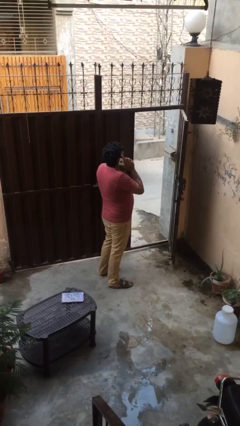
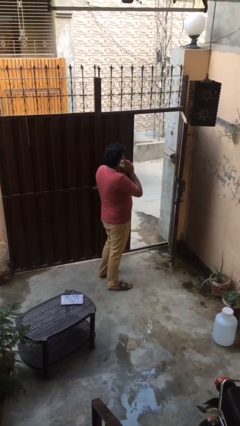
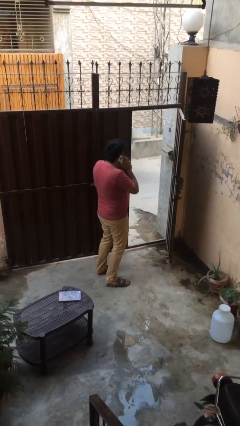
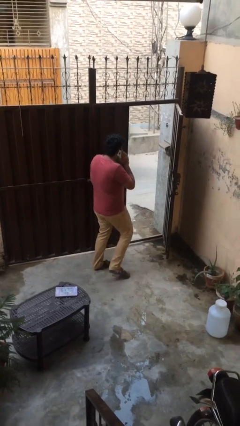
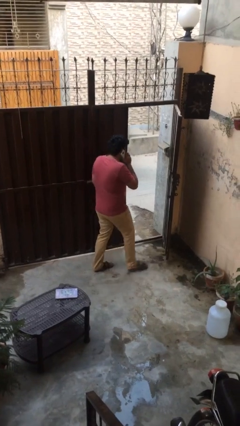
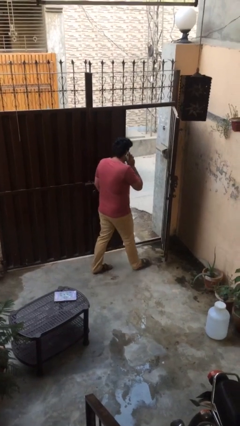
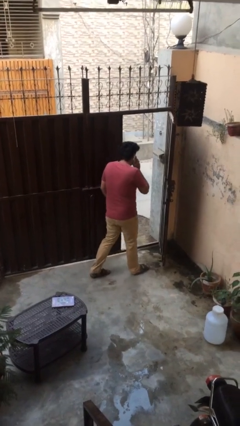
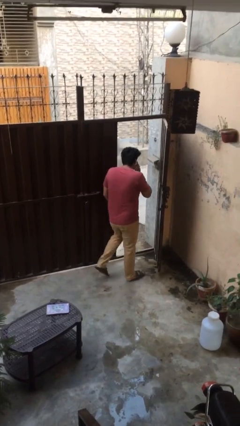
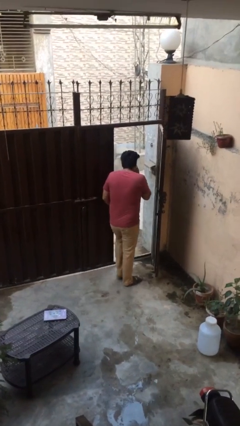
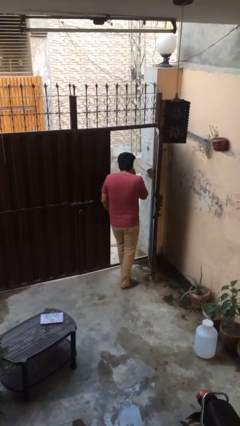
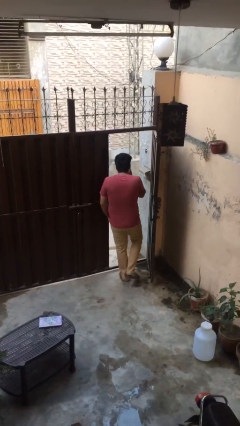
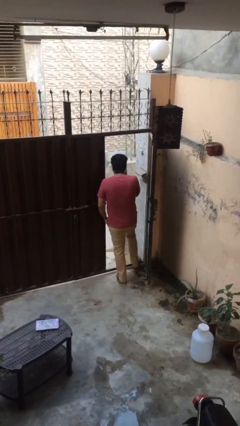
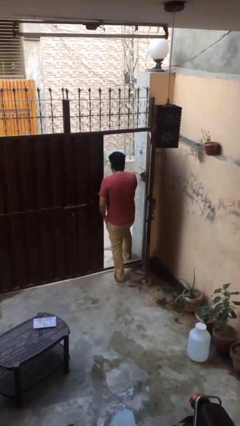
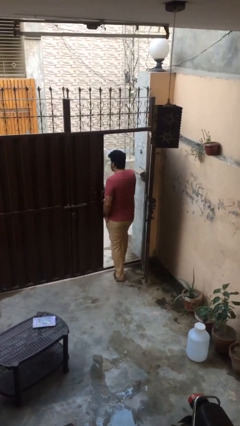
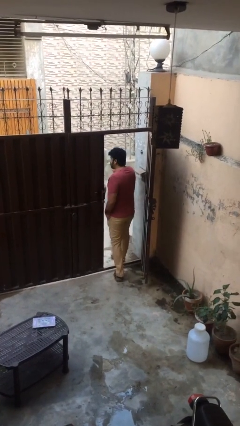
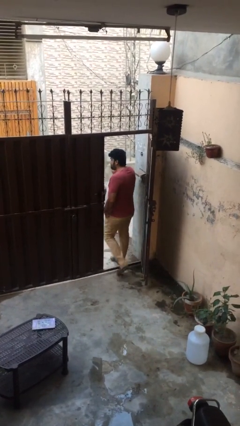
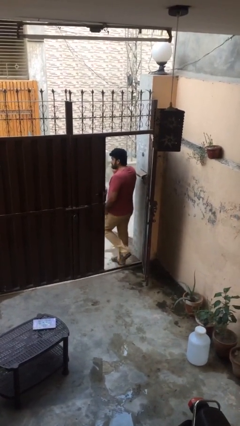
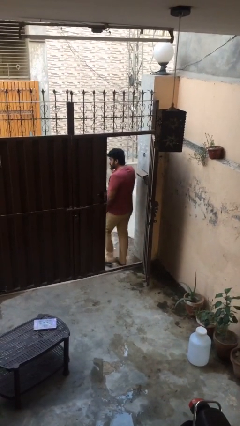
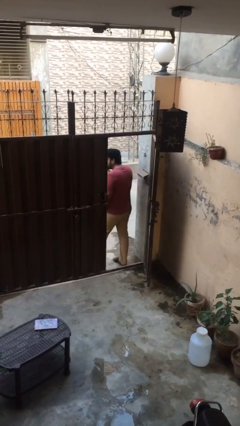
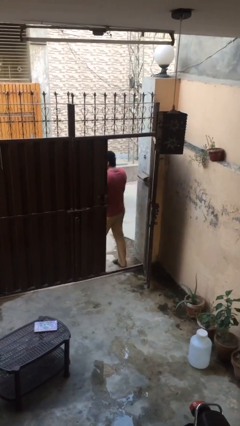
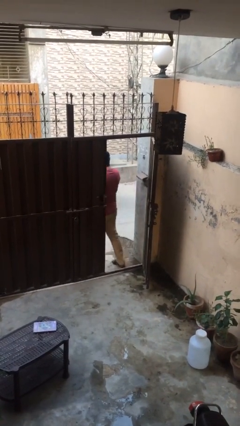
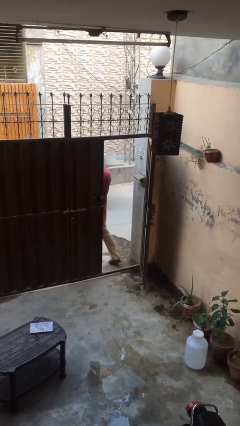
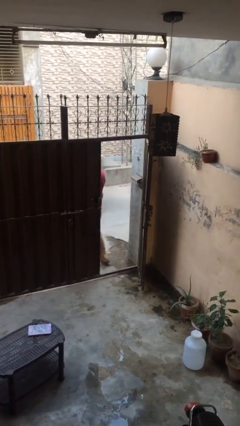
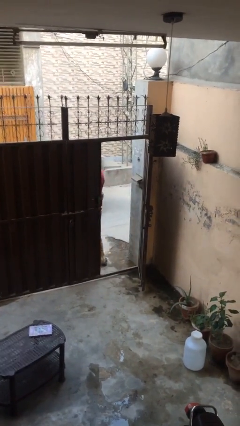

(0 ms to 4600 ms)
person exits scene through structure

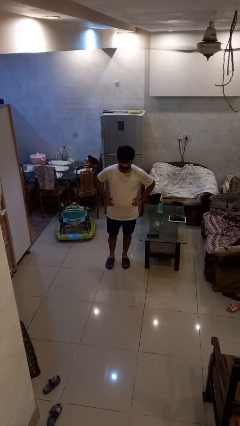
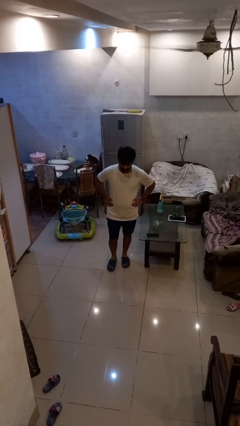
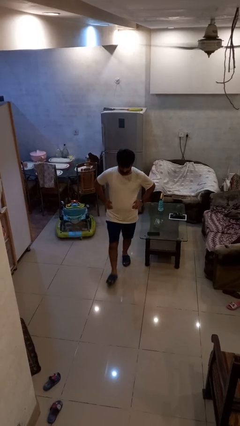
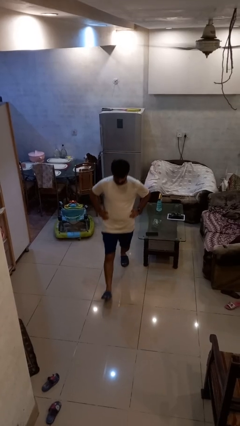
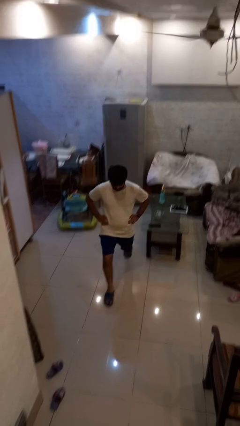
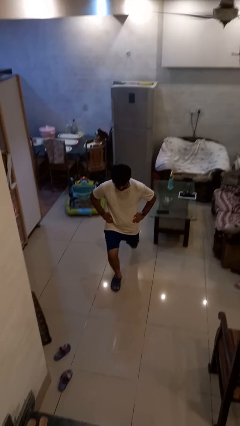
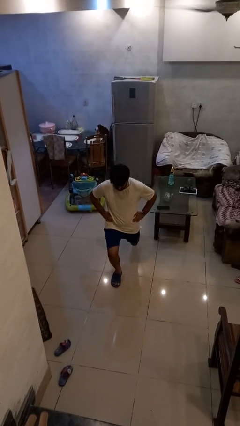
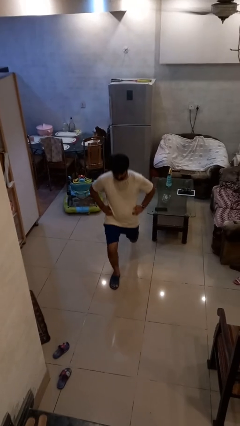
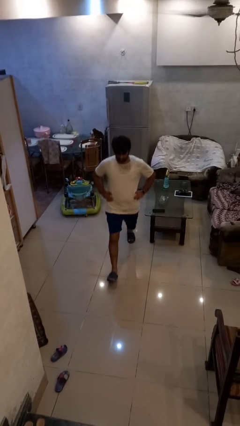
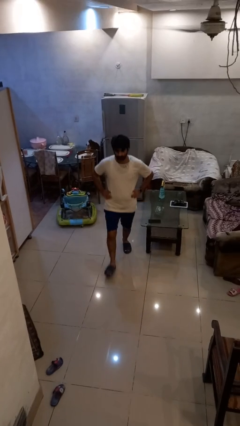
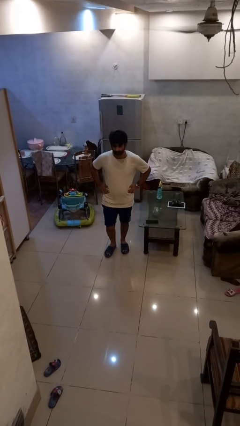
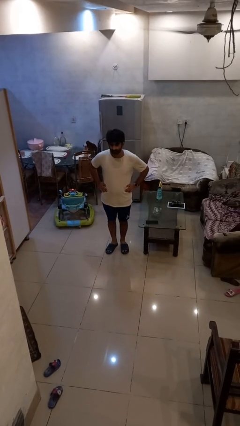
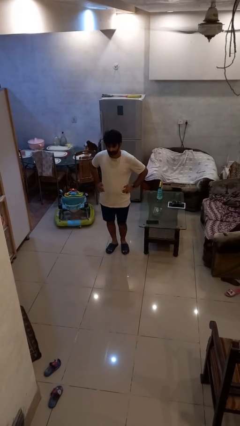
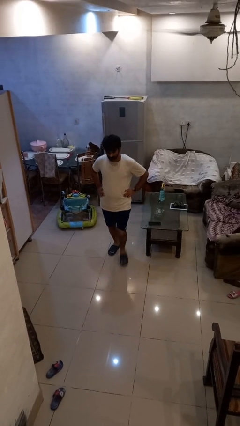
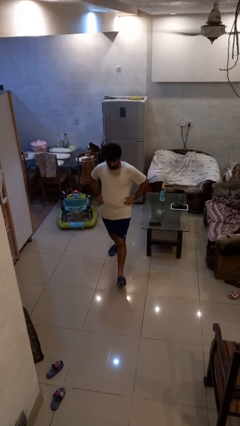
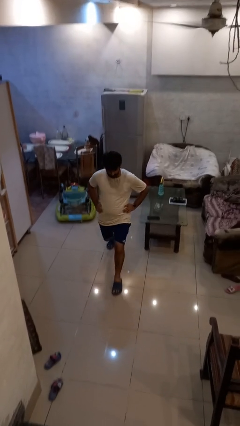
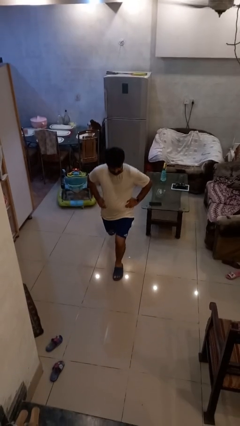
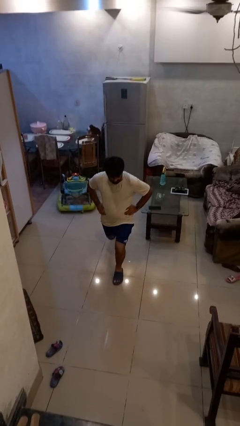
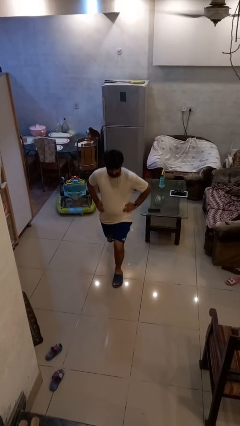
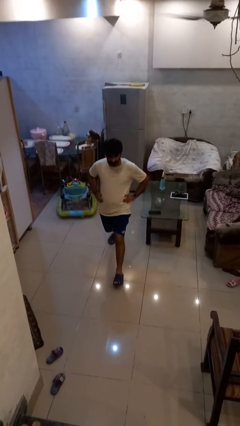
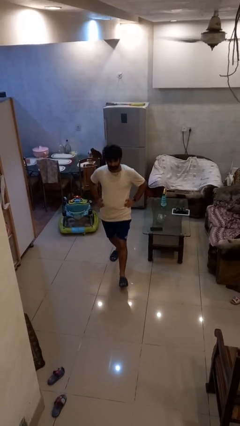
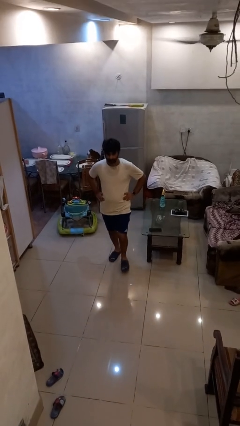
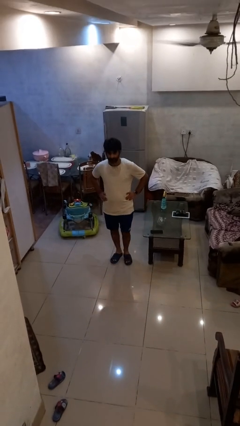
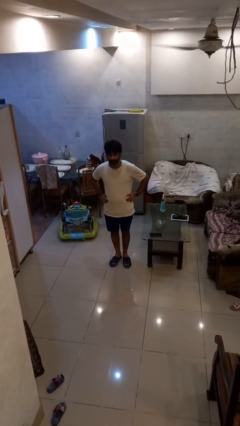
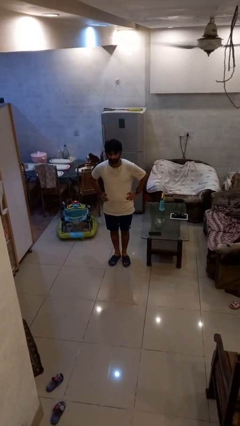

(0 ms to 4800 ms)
person exercises with lunges

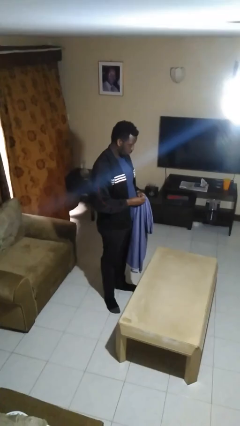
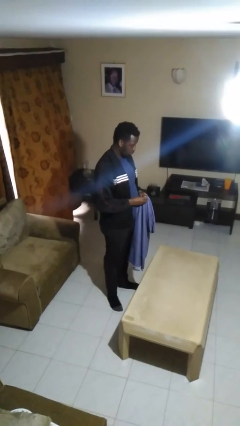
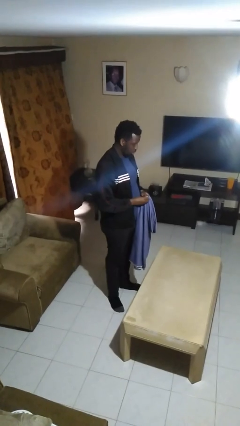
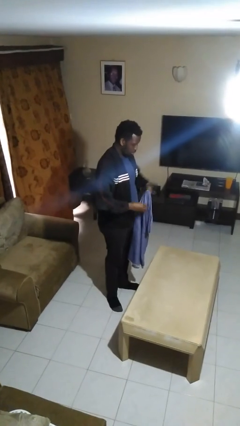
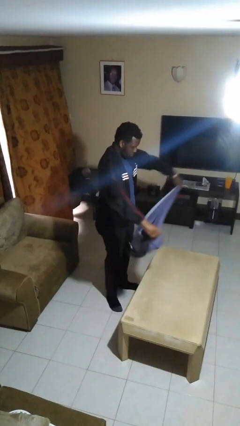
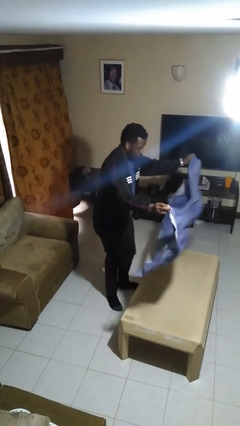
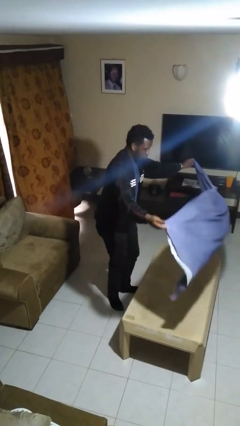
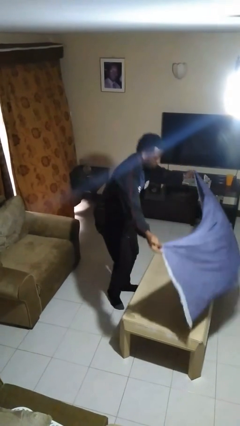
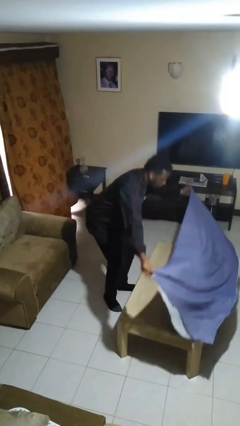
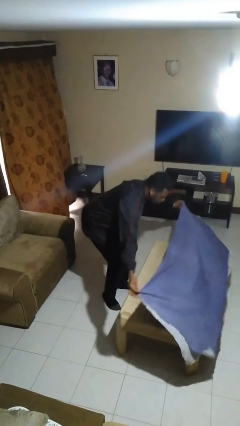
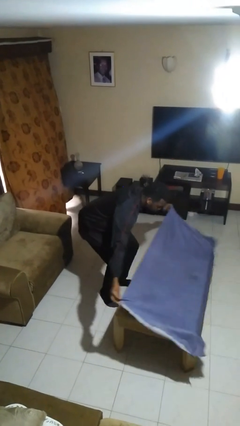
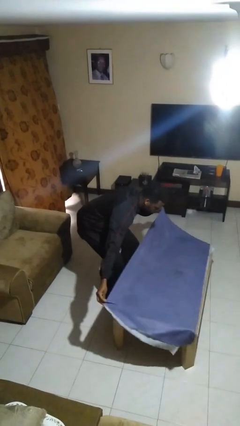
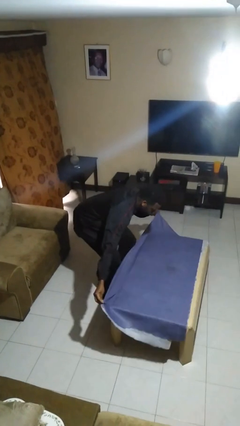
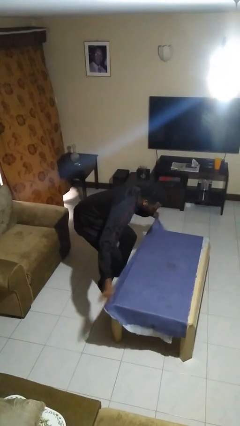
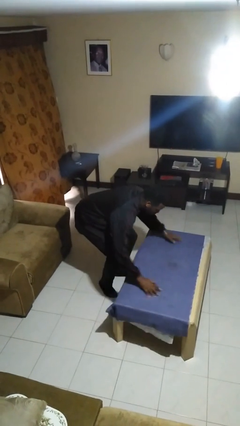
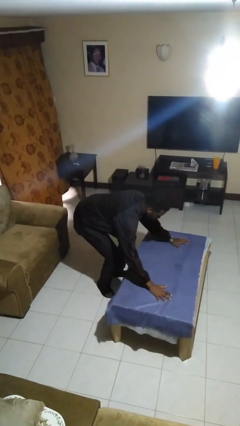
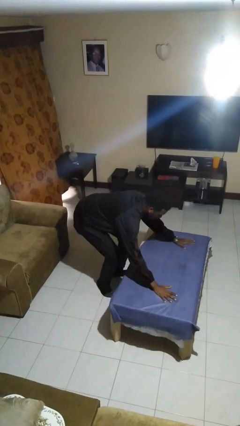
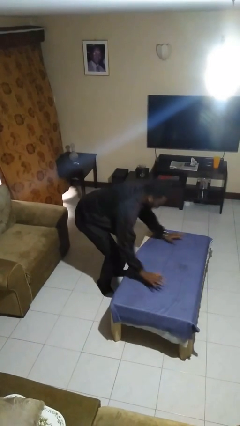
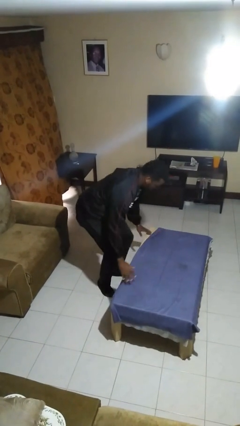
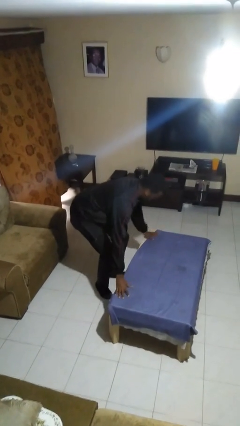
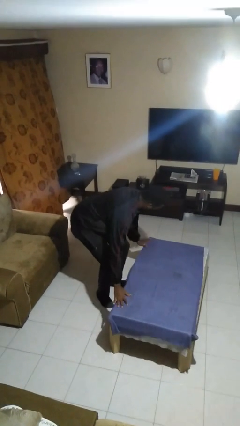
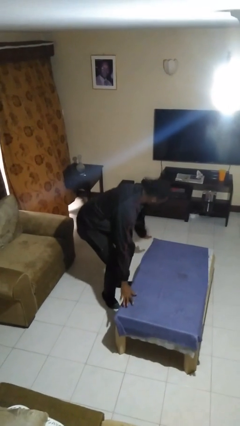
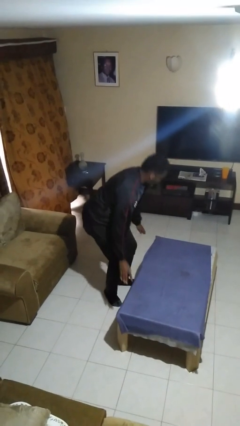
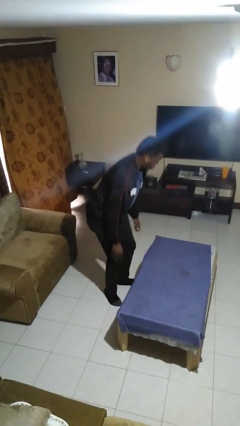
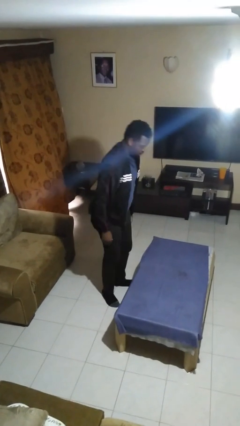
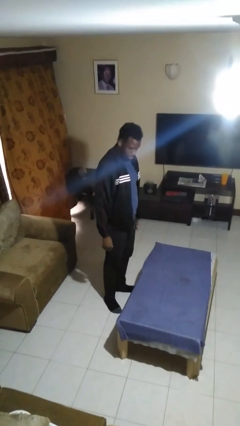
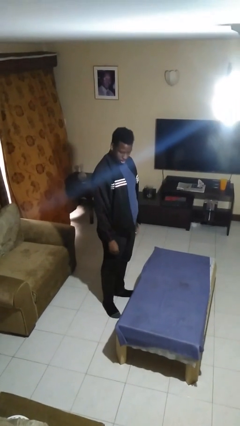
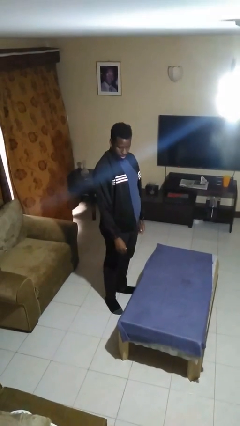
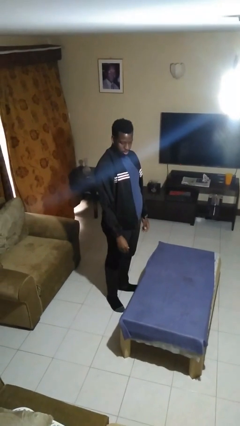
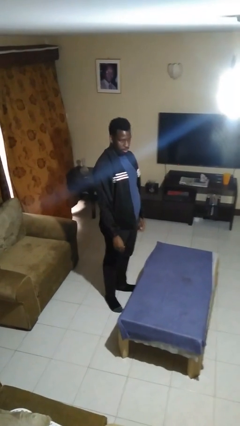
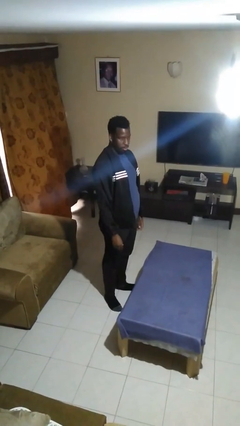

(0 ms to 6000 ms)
person folds blanket

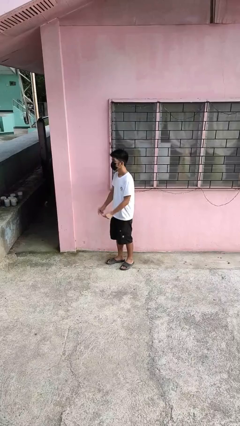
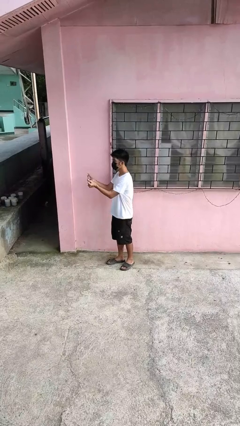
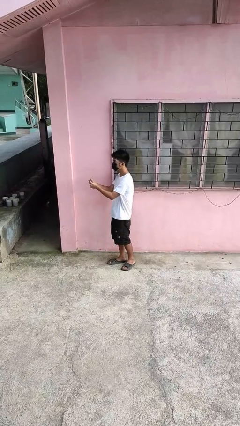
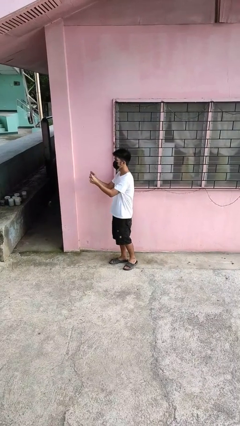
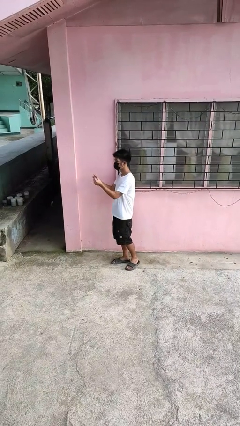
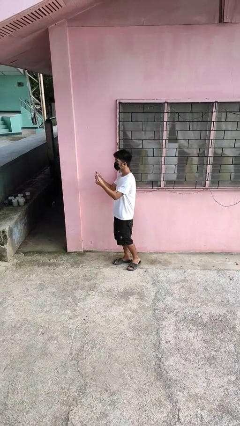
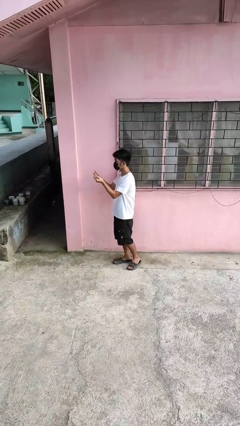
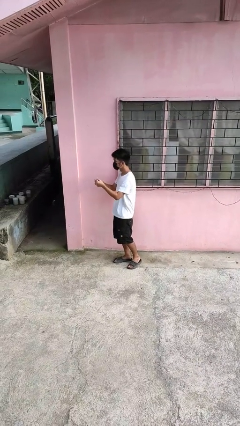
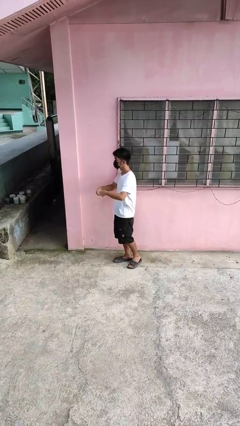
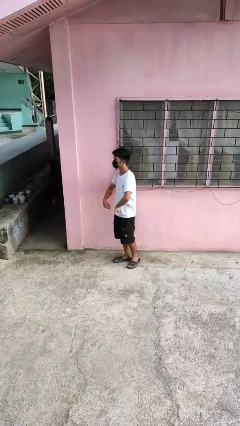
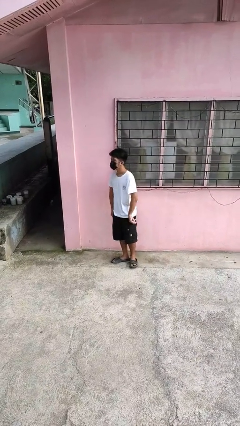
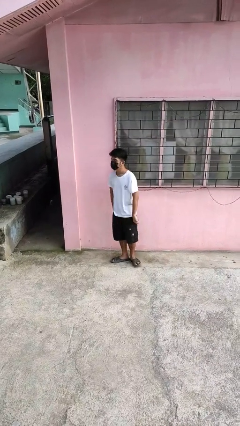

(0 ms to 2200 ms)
person snaps fingers

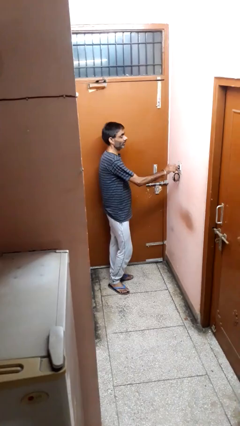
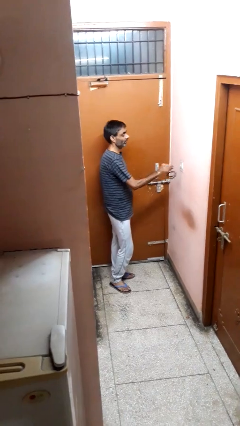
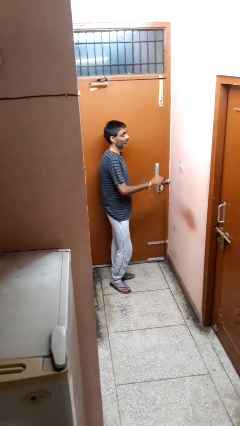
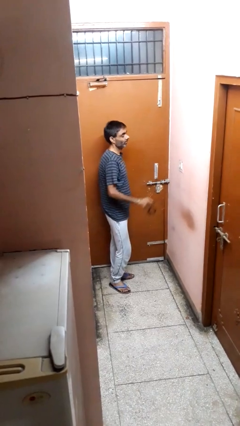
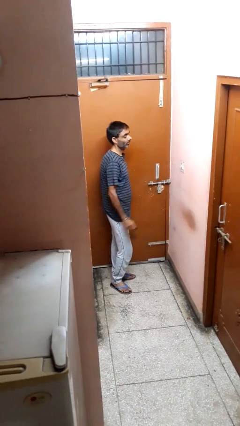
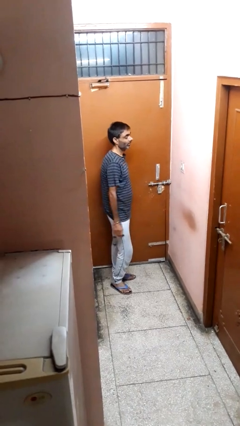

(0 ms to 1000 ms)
person unplugs from electrical socket
